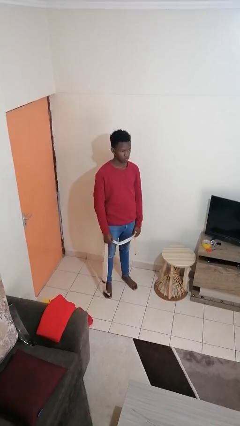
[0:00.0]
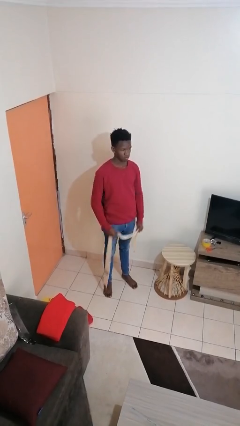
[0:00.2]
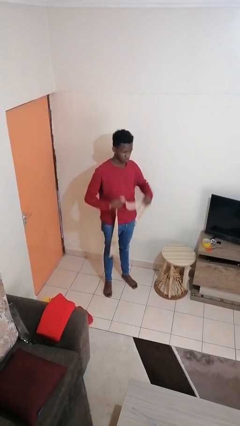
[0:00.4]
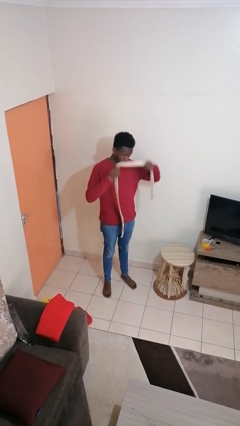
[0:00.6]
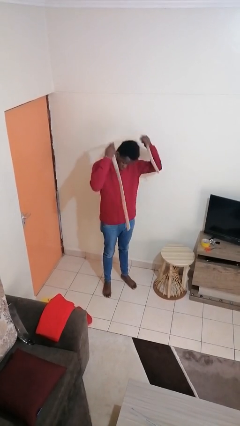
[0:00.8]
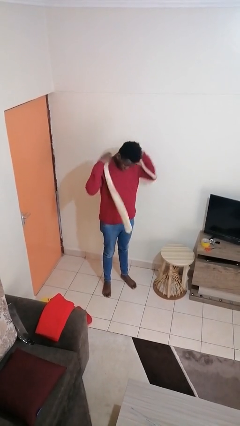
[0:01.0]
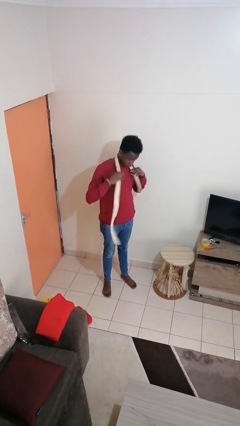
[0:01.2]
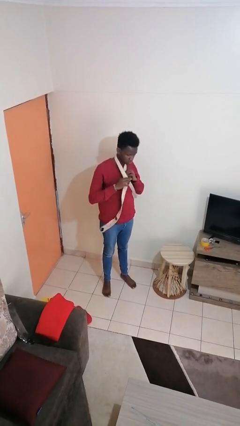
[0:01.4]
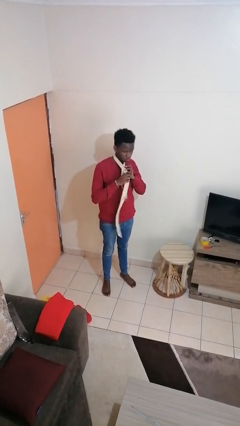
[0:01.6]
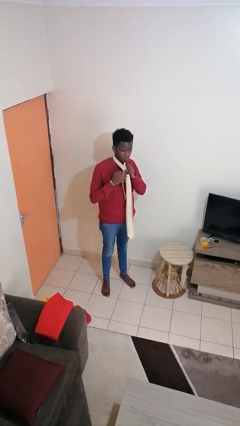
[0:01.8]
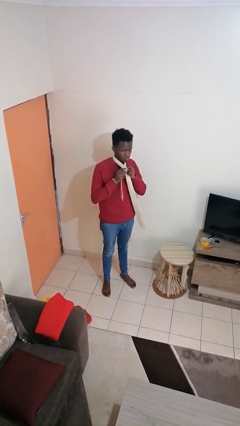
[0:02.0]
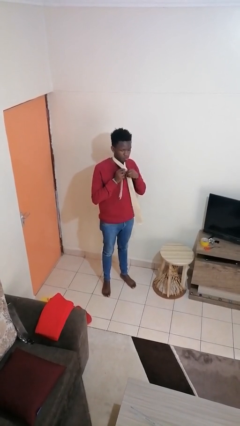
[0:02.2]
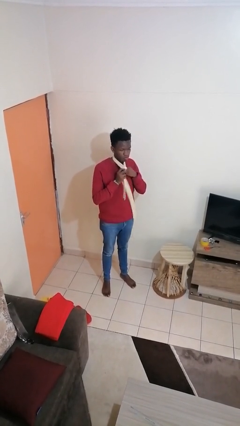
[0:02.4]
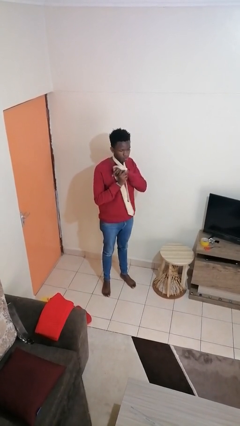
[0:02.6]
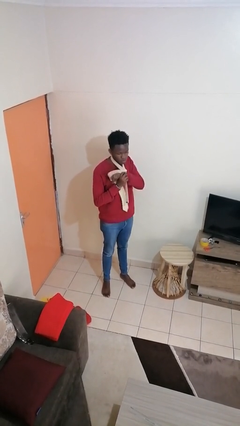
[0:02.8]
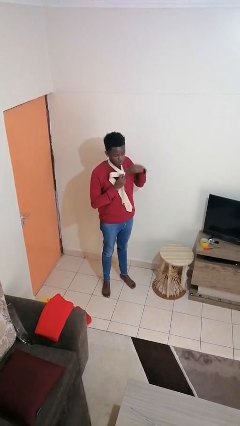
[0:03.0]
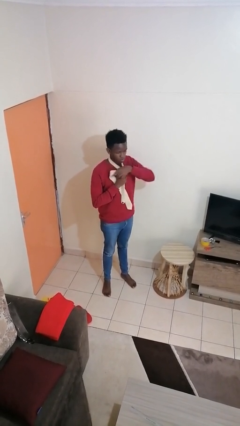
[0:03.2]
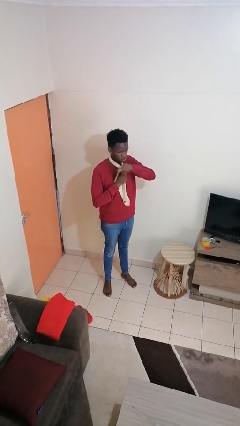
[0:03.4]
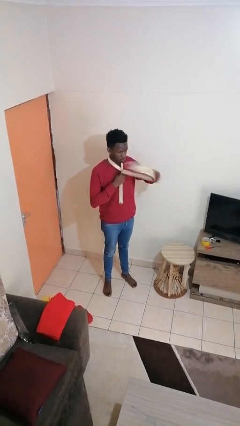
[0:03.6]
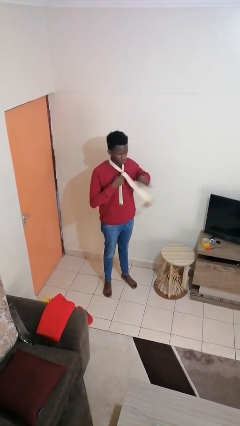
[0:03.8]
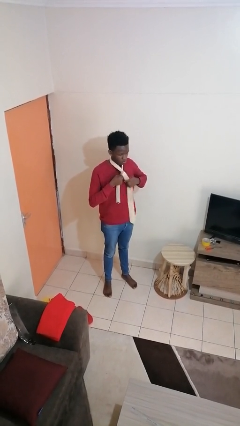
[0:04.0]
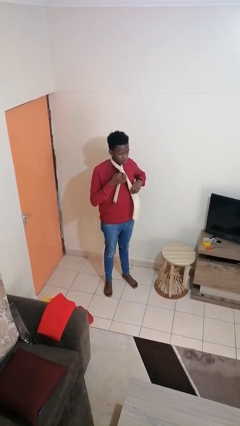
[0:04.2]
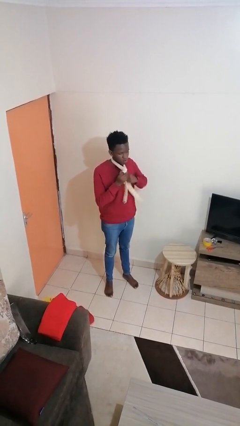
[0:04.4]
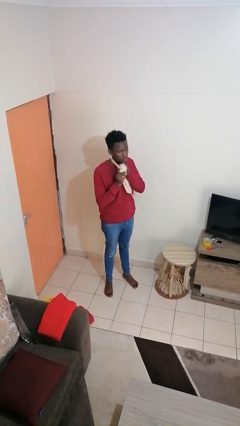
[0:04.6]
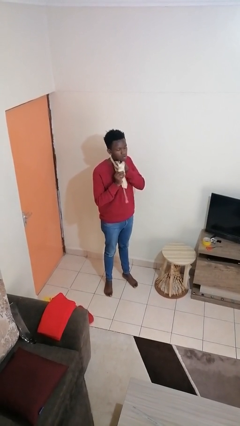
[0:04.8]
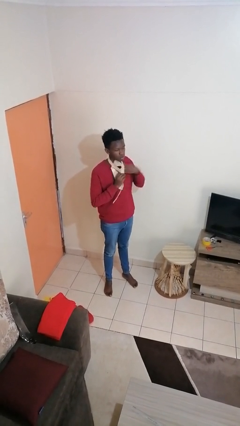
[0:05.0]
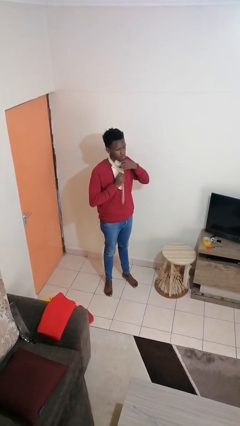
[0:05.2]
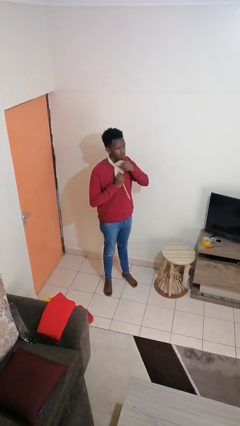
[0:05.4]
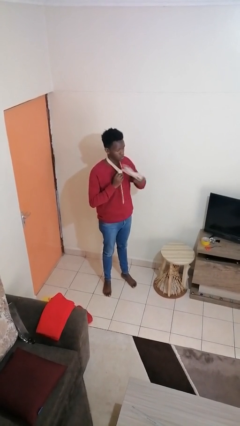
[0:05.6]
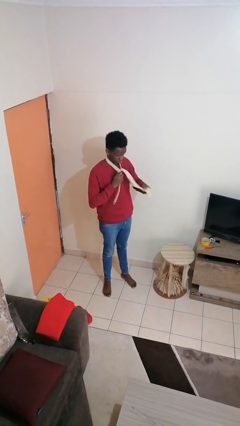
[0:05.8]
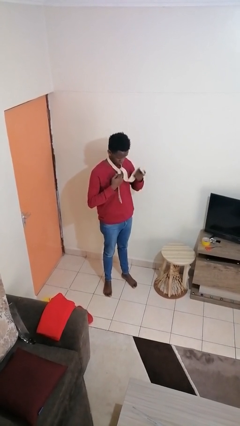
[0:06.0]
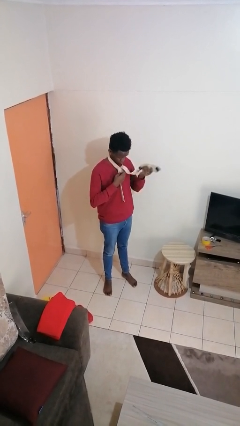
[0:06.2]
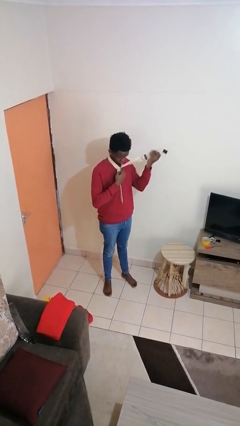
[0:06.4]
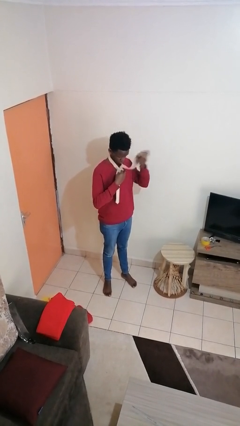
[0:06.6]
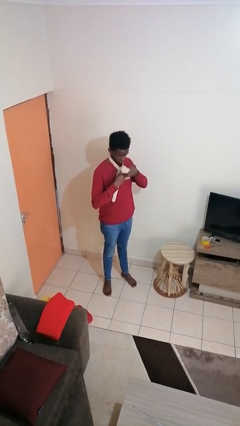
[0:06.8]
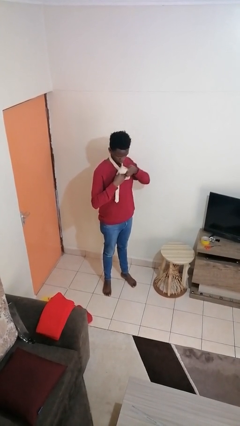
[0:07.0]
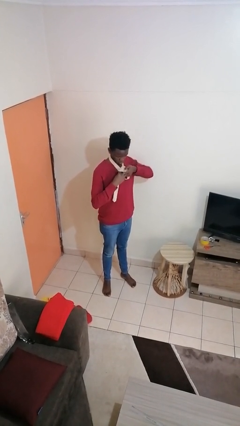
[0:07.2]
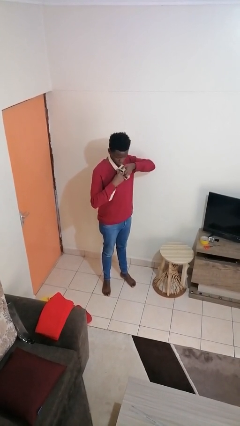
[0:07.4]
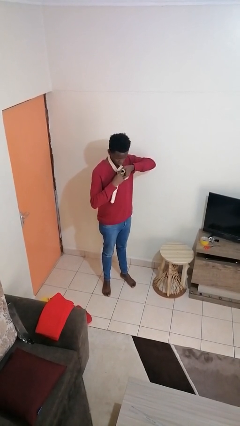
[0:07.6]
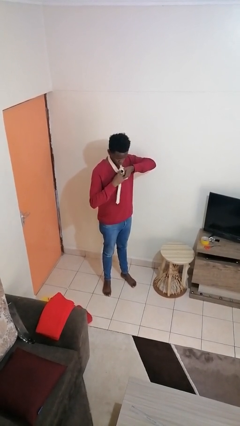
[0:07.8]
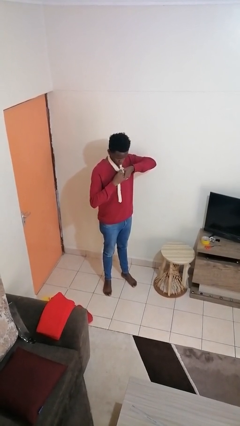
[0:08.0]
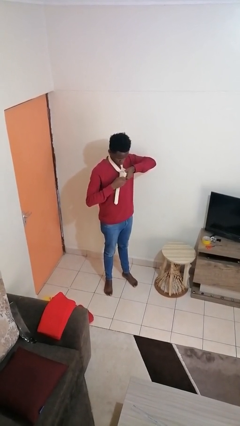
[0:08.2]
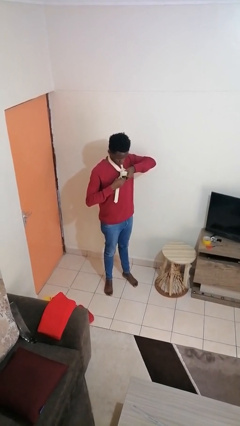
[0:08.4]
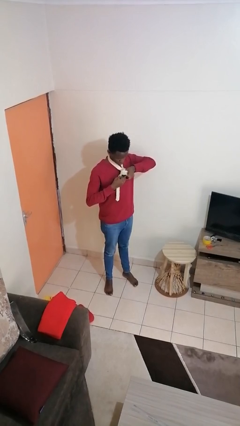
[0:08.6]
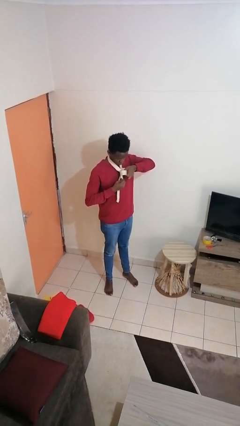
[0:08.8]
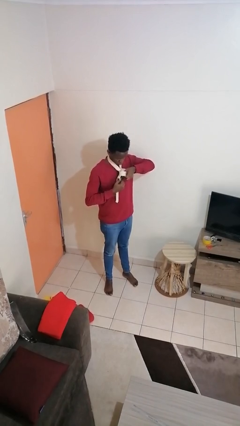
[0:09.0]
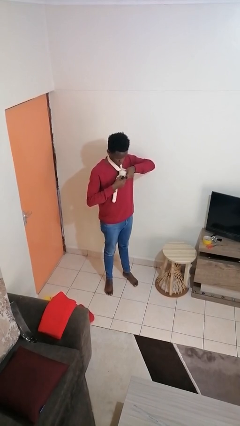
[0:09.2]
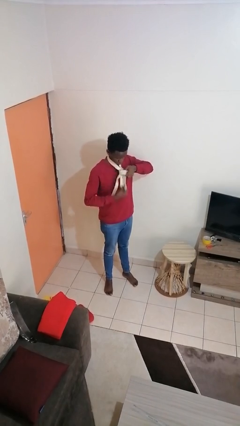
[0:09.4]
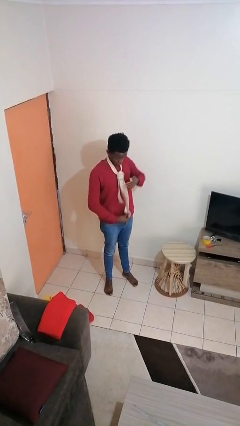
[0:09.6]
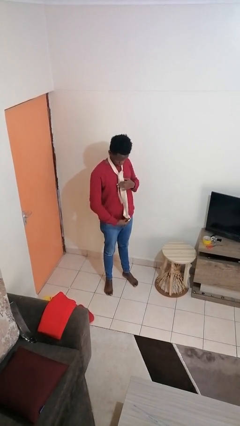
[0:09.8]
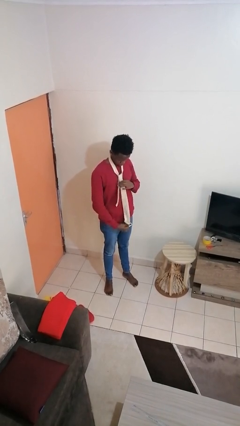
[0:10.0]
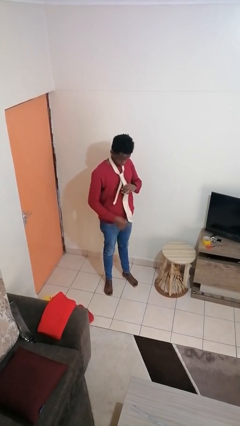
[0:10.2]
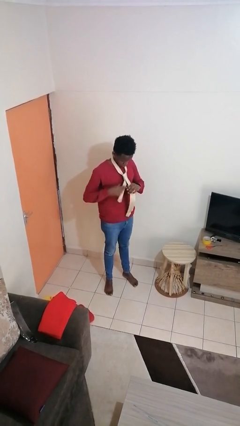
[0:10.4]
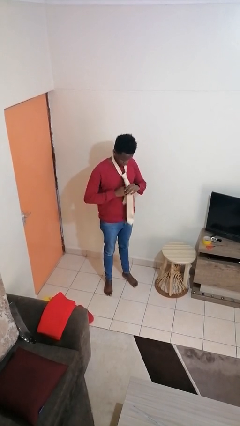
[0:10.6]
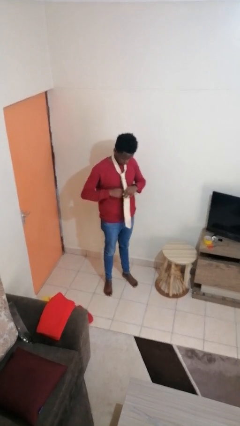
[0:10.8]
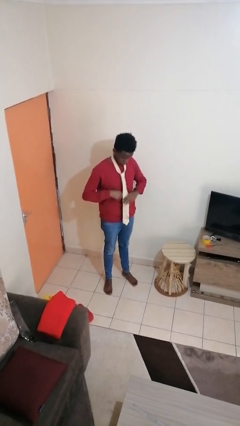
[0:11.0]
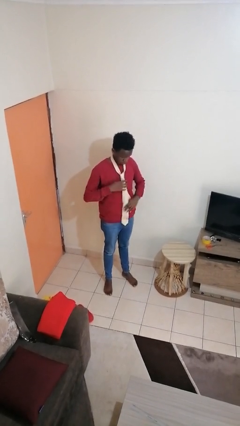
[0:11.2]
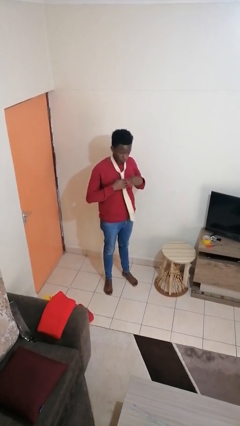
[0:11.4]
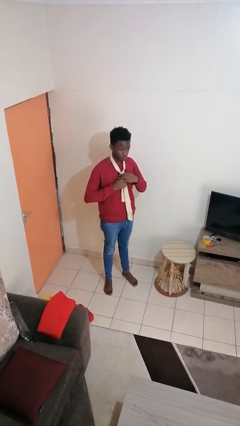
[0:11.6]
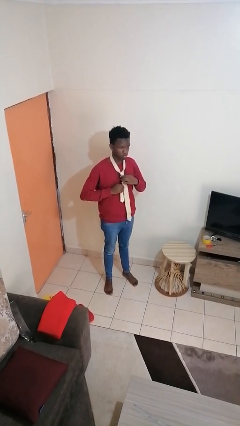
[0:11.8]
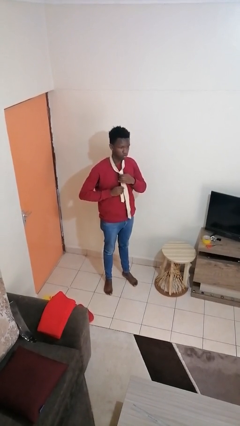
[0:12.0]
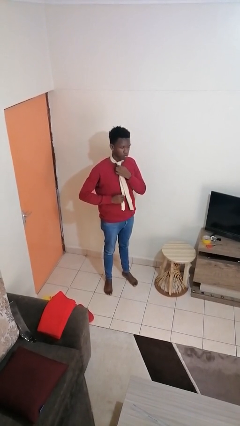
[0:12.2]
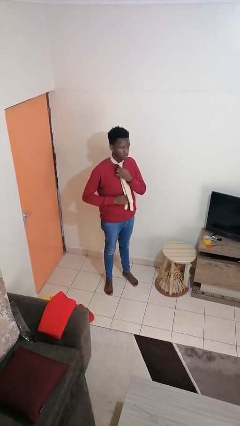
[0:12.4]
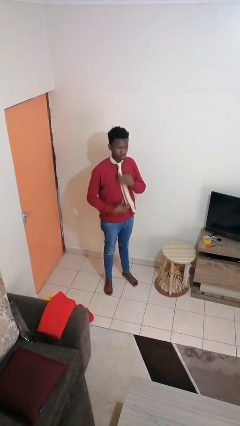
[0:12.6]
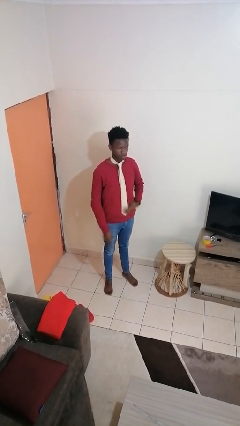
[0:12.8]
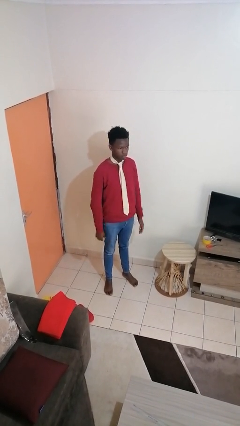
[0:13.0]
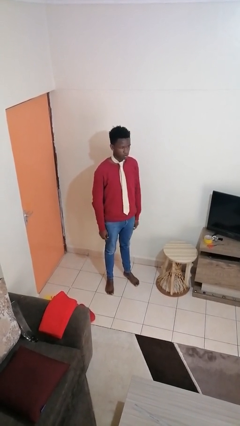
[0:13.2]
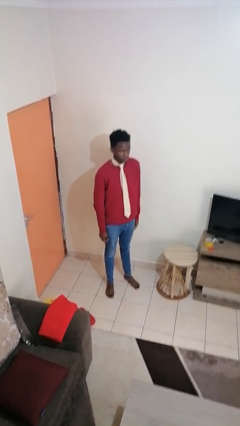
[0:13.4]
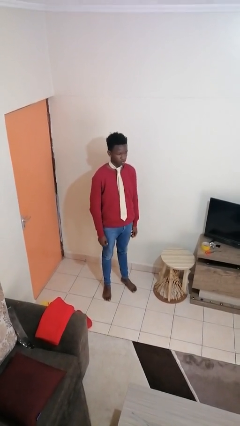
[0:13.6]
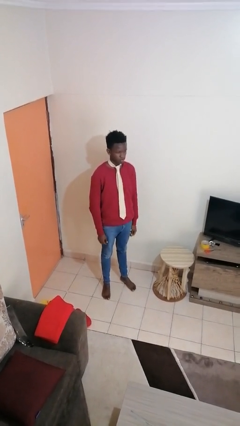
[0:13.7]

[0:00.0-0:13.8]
person puts on necktie

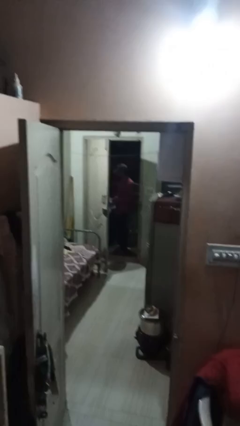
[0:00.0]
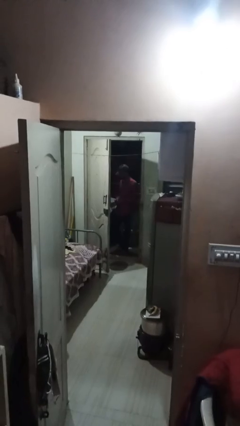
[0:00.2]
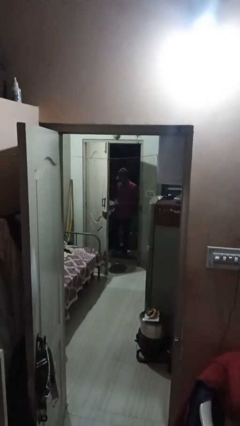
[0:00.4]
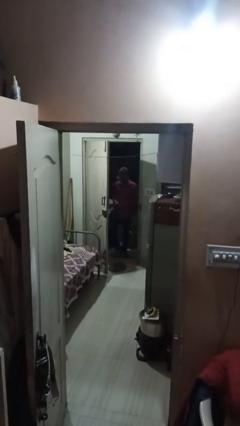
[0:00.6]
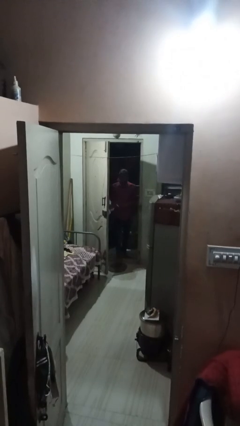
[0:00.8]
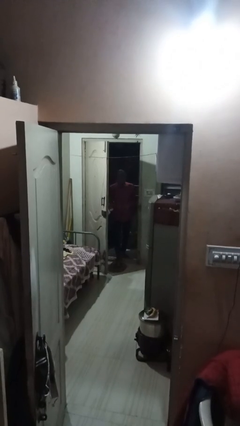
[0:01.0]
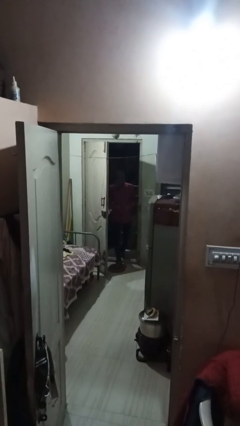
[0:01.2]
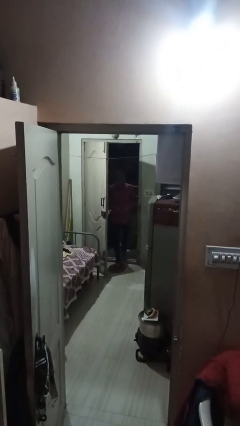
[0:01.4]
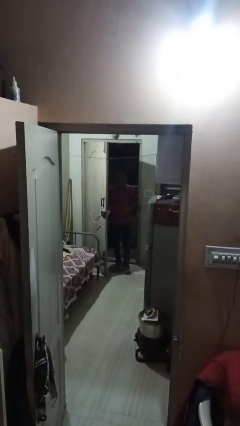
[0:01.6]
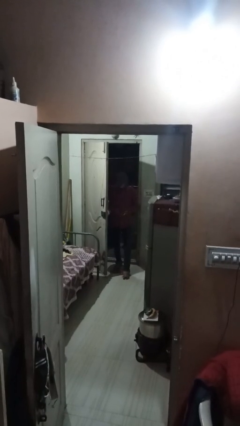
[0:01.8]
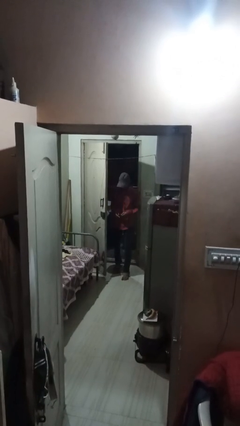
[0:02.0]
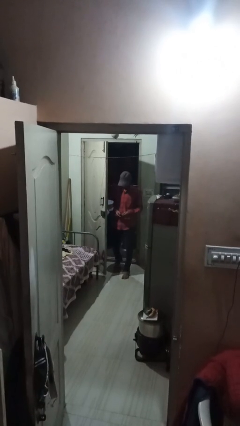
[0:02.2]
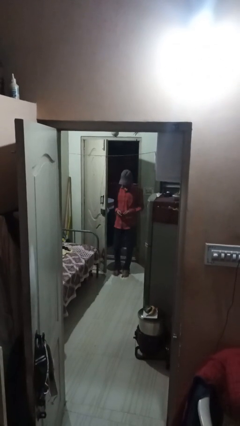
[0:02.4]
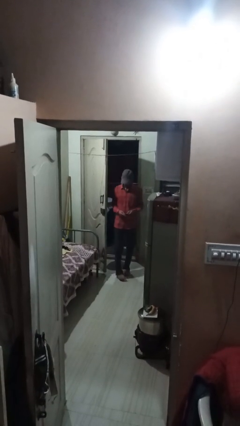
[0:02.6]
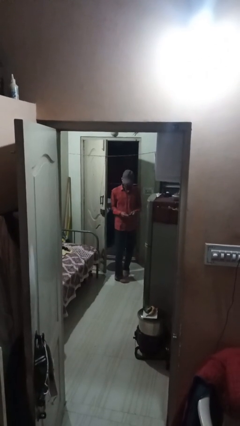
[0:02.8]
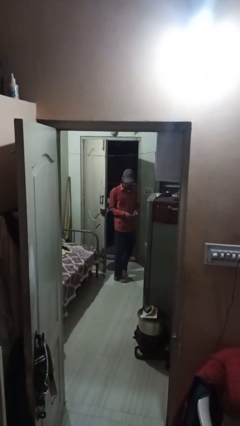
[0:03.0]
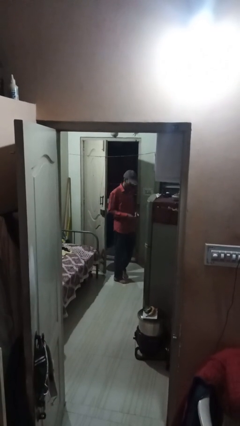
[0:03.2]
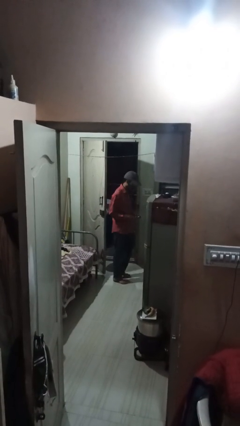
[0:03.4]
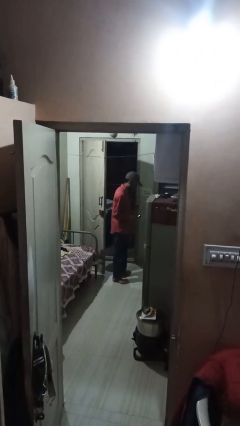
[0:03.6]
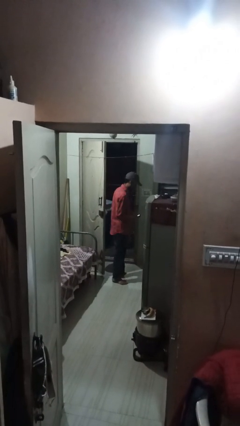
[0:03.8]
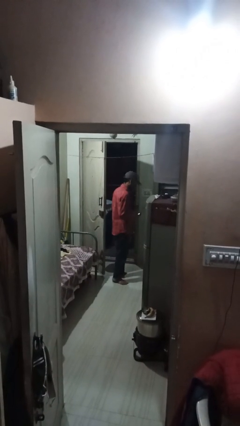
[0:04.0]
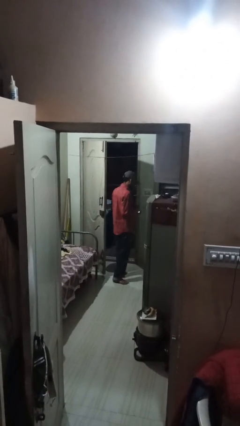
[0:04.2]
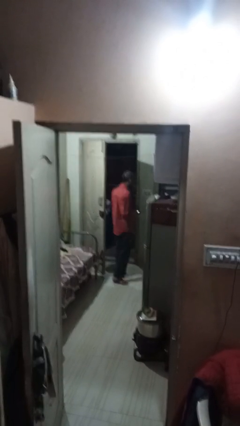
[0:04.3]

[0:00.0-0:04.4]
person enters scene through structure
